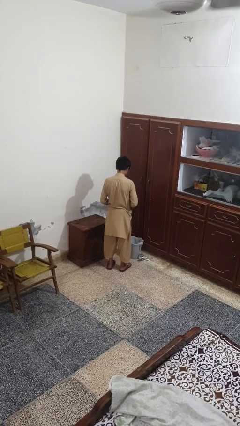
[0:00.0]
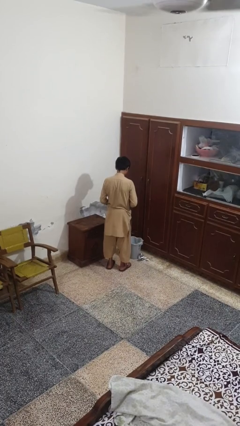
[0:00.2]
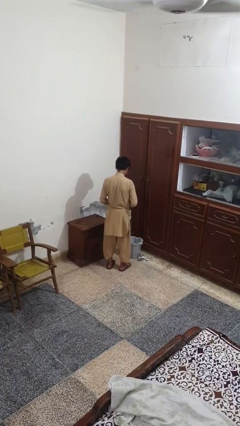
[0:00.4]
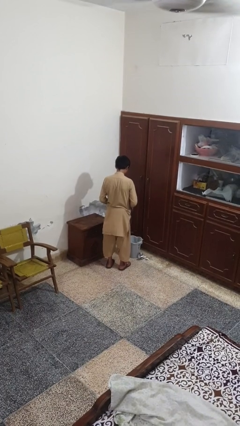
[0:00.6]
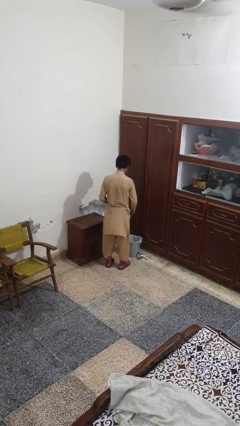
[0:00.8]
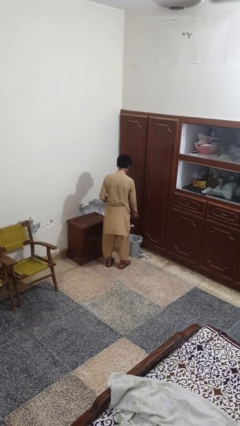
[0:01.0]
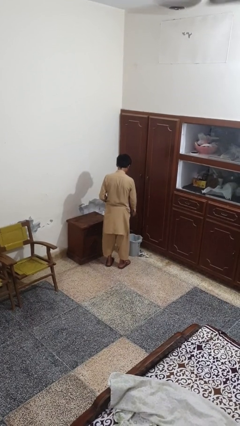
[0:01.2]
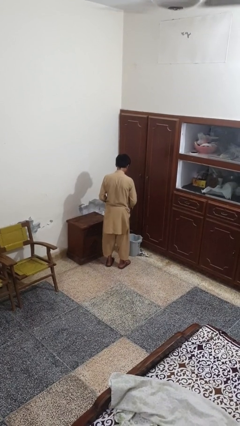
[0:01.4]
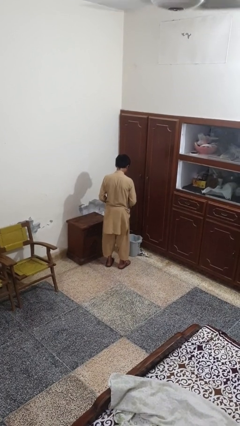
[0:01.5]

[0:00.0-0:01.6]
person discards trash

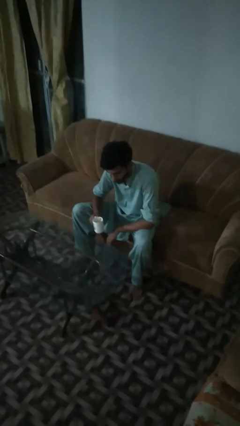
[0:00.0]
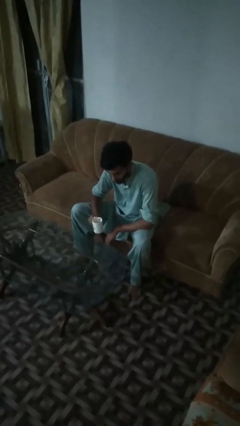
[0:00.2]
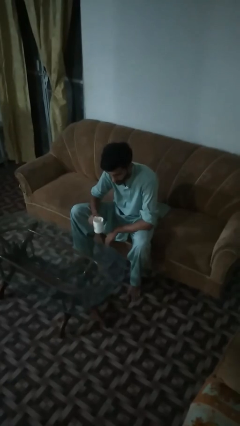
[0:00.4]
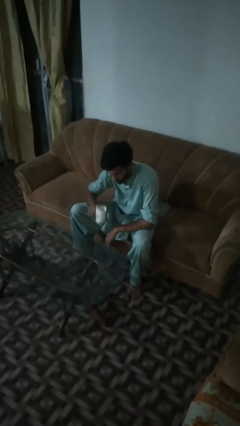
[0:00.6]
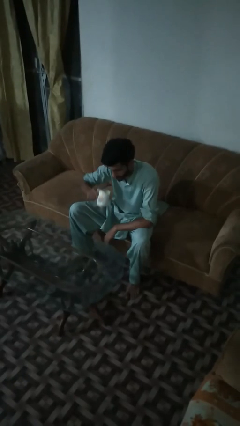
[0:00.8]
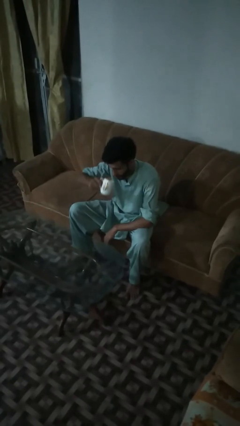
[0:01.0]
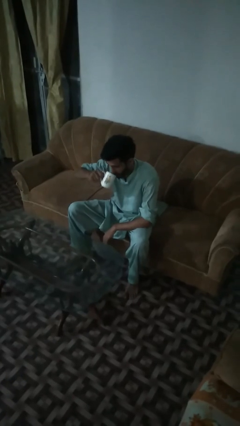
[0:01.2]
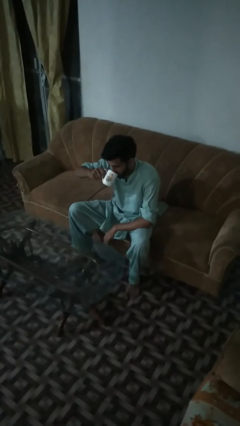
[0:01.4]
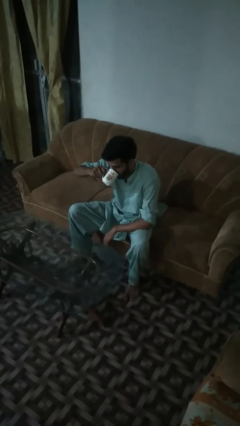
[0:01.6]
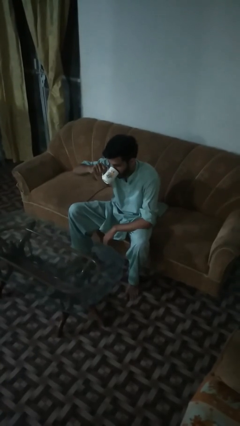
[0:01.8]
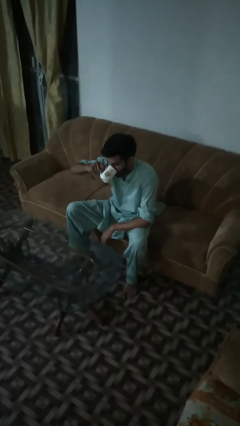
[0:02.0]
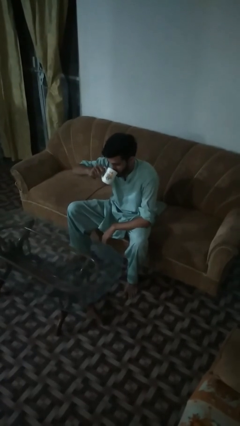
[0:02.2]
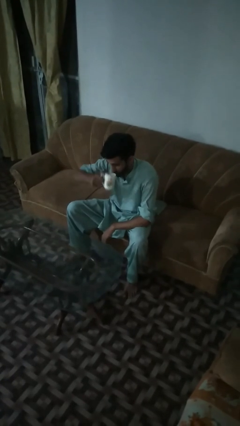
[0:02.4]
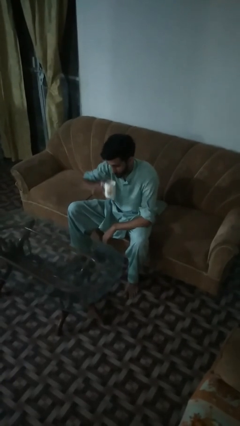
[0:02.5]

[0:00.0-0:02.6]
person drinks from mug

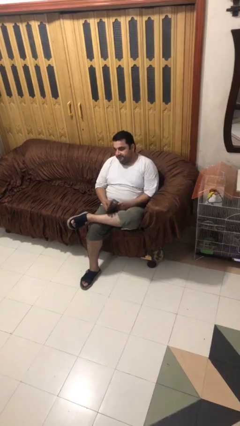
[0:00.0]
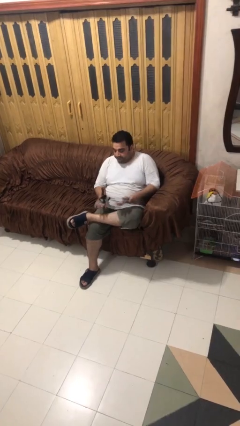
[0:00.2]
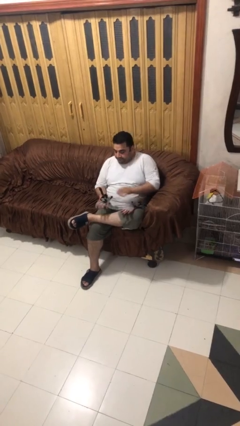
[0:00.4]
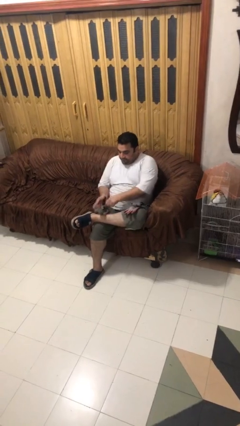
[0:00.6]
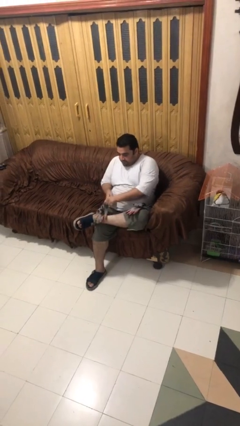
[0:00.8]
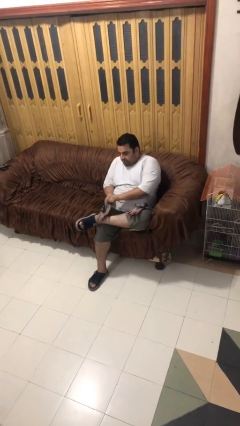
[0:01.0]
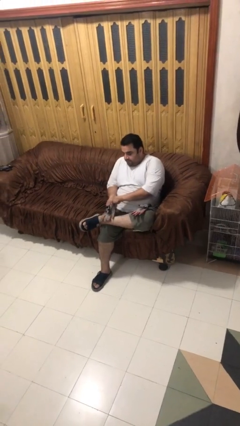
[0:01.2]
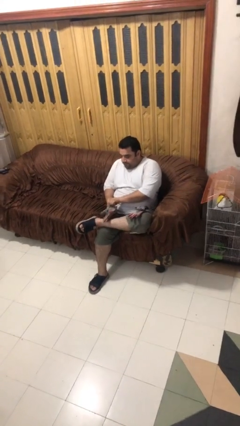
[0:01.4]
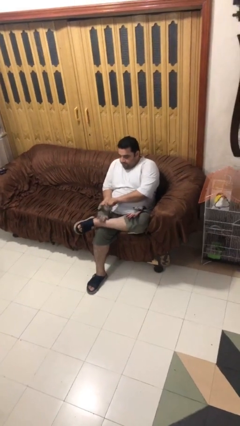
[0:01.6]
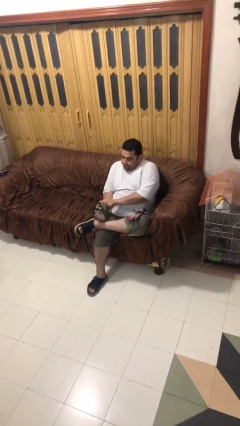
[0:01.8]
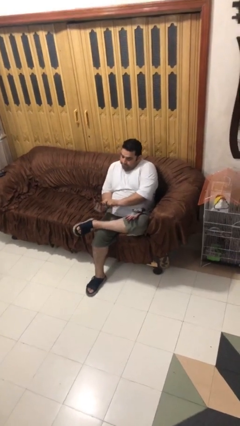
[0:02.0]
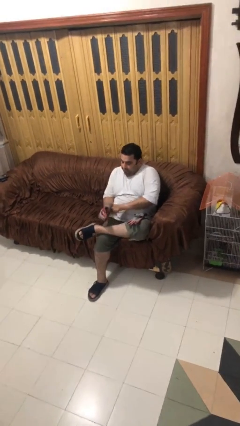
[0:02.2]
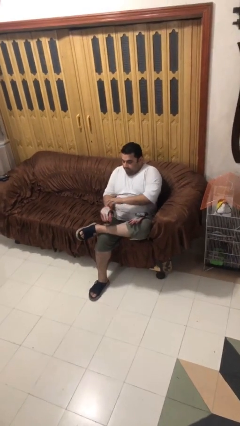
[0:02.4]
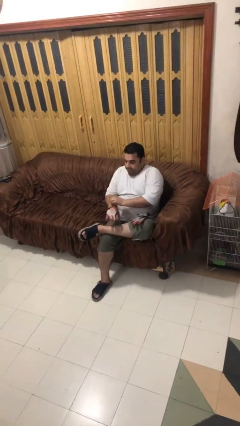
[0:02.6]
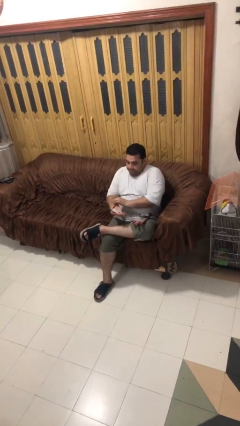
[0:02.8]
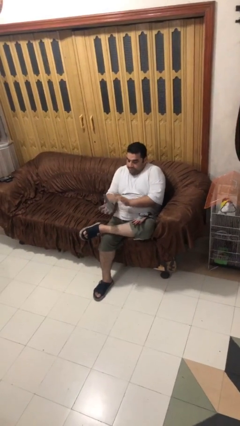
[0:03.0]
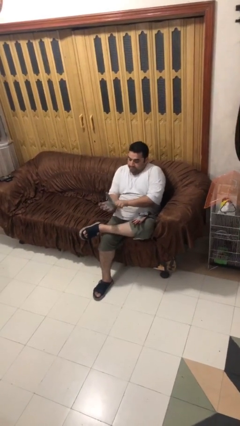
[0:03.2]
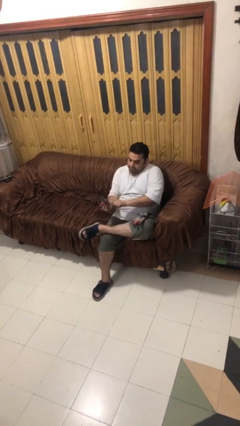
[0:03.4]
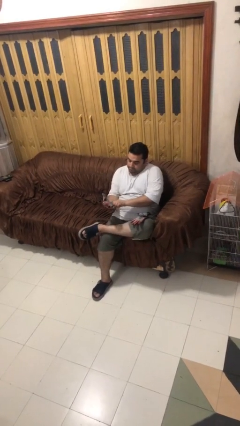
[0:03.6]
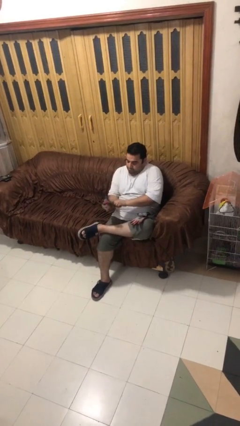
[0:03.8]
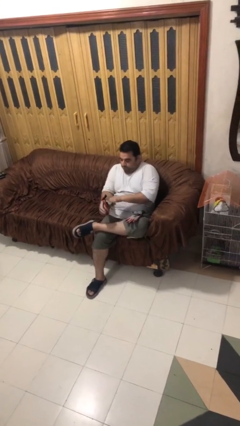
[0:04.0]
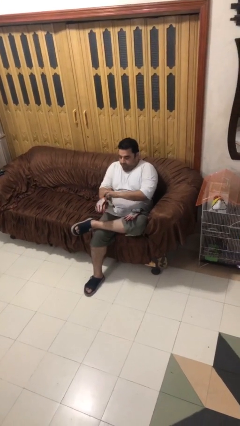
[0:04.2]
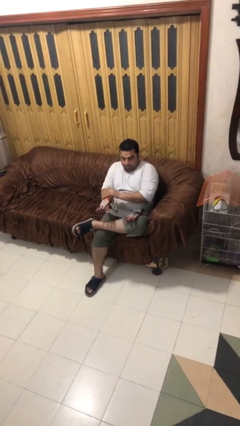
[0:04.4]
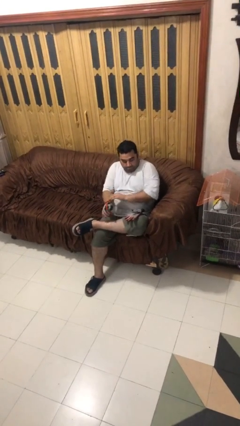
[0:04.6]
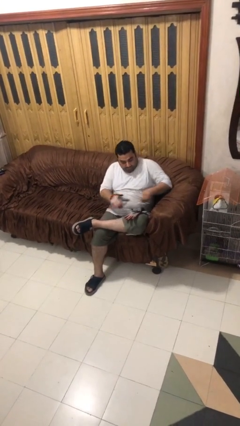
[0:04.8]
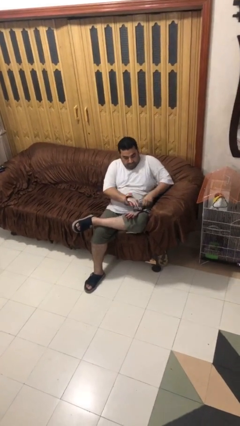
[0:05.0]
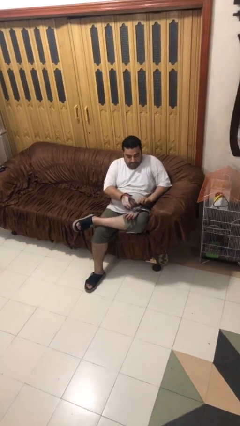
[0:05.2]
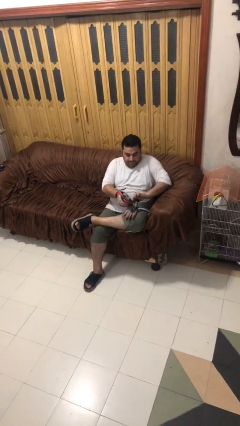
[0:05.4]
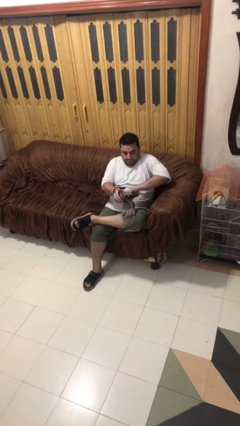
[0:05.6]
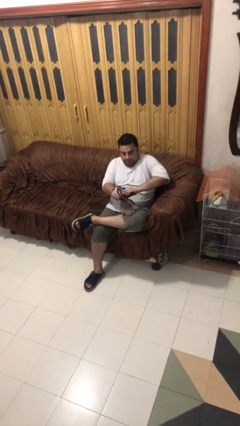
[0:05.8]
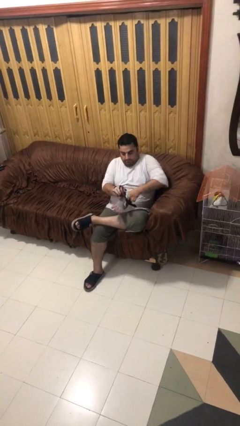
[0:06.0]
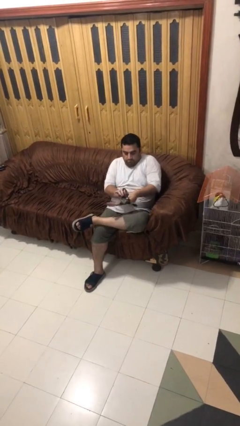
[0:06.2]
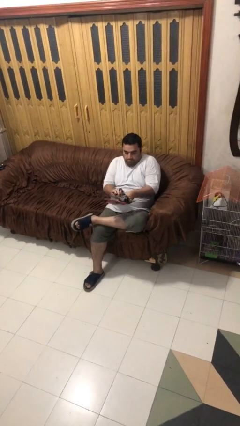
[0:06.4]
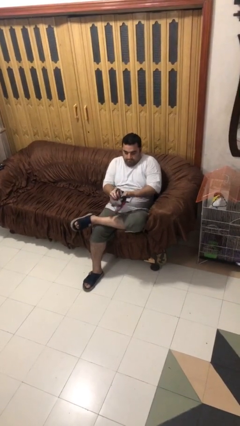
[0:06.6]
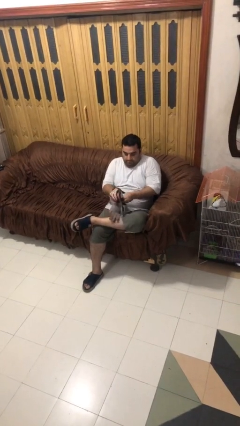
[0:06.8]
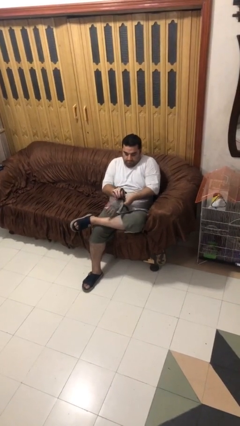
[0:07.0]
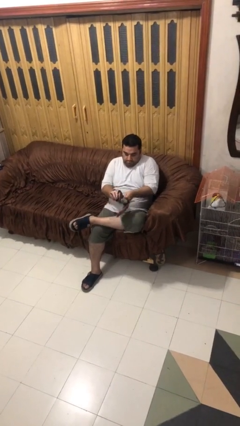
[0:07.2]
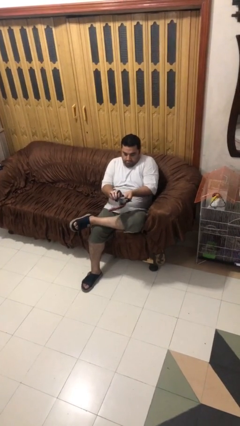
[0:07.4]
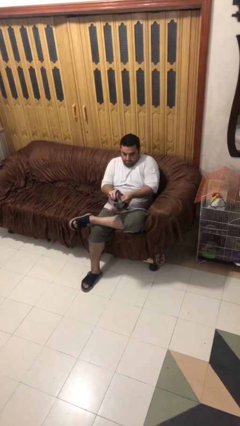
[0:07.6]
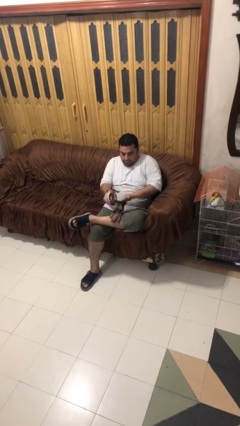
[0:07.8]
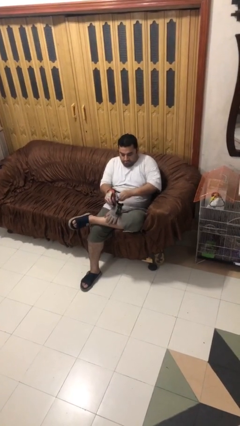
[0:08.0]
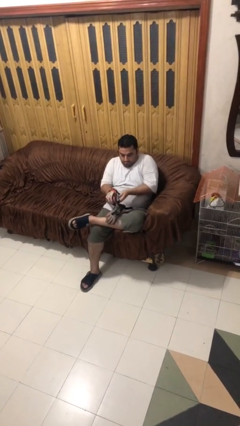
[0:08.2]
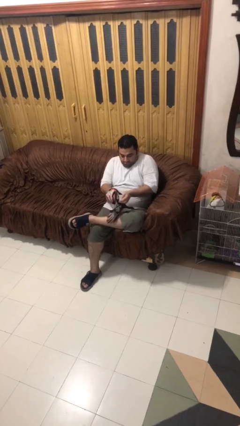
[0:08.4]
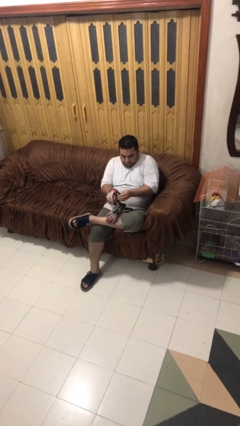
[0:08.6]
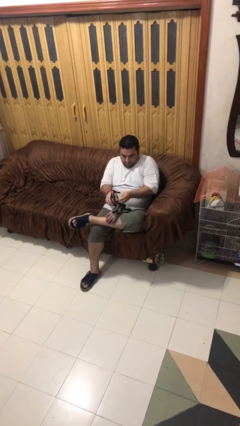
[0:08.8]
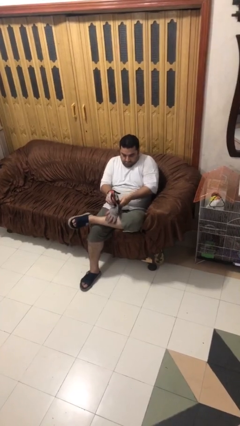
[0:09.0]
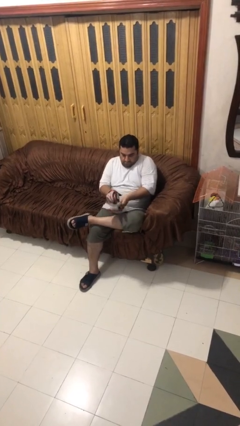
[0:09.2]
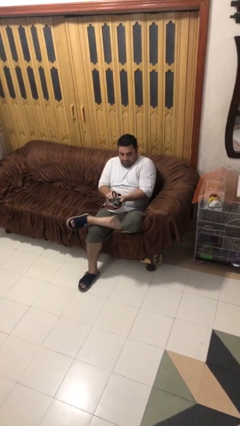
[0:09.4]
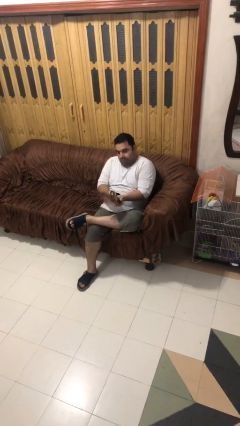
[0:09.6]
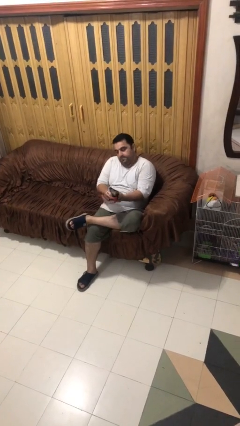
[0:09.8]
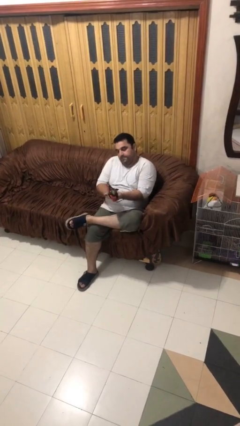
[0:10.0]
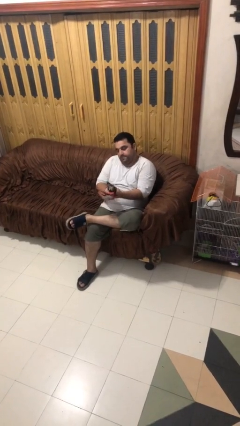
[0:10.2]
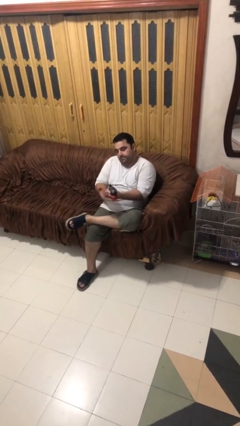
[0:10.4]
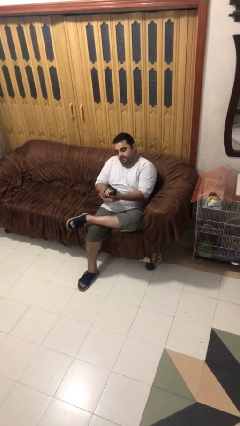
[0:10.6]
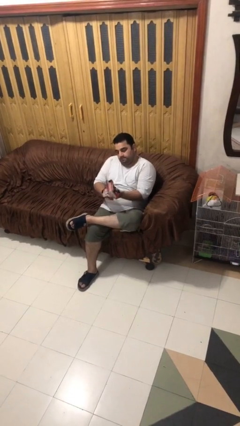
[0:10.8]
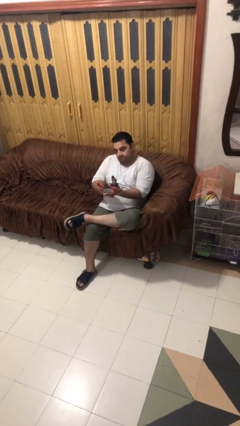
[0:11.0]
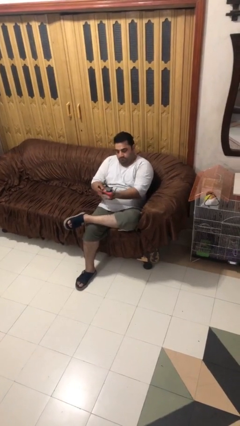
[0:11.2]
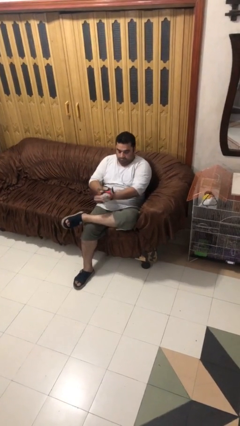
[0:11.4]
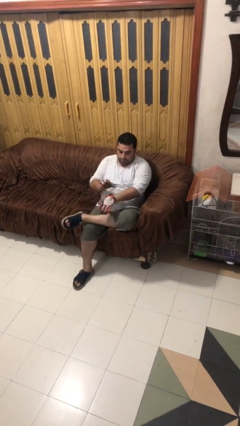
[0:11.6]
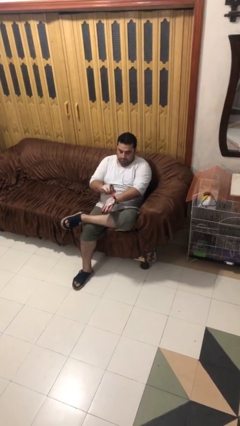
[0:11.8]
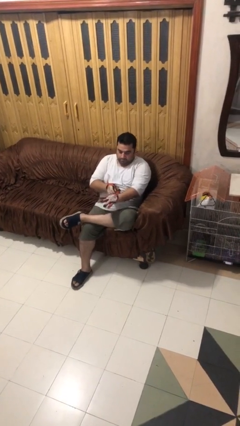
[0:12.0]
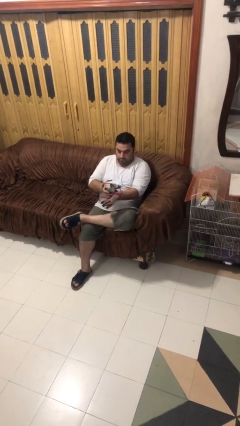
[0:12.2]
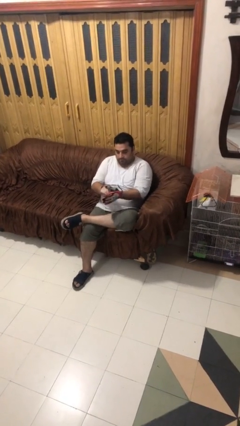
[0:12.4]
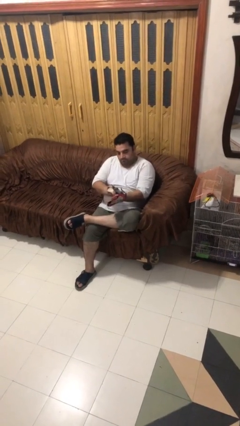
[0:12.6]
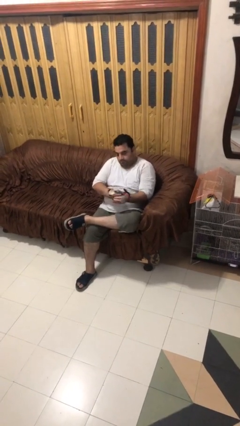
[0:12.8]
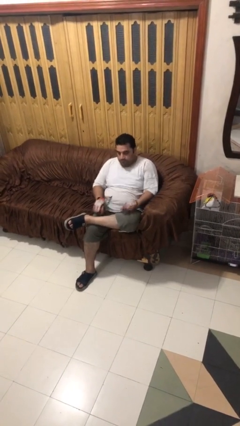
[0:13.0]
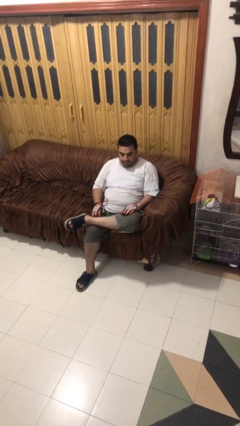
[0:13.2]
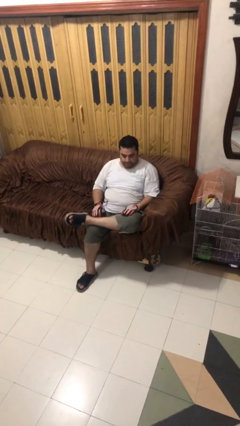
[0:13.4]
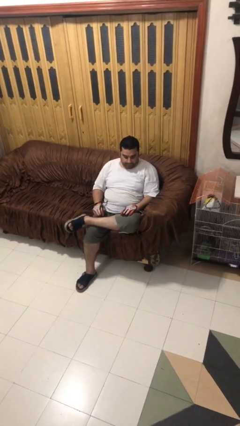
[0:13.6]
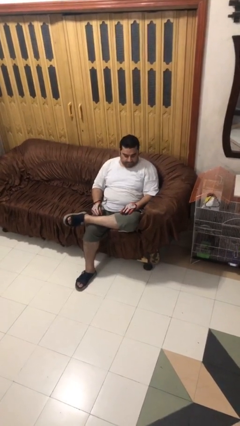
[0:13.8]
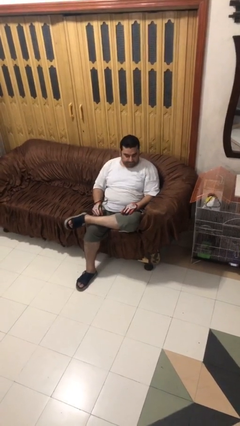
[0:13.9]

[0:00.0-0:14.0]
person puts on gloves
